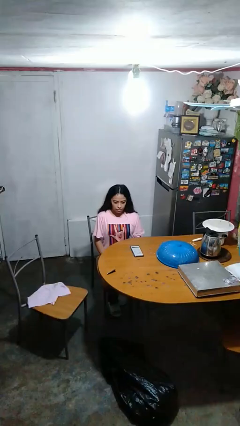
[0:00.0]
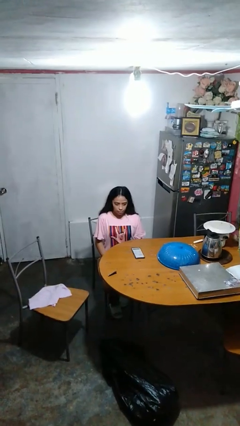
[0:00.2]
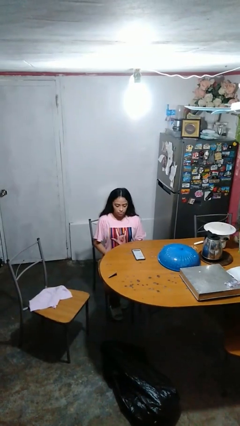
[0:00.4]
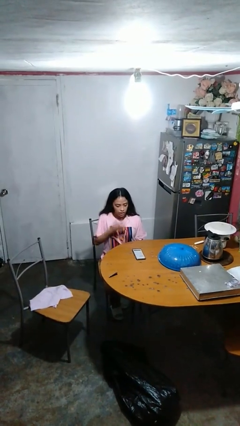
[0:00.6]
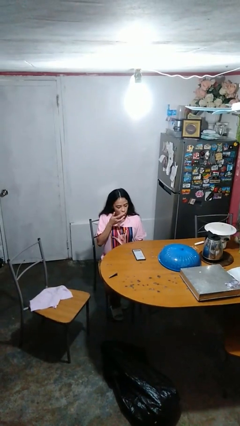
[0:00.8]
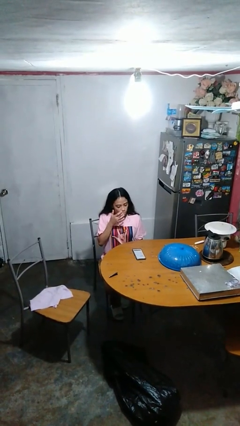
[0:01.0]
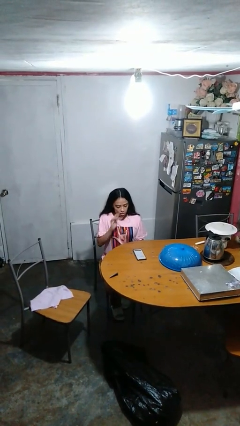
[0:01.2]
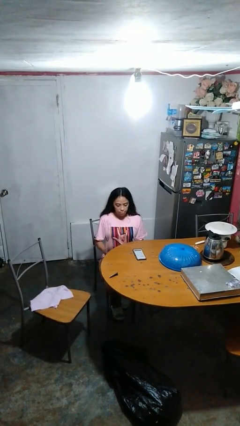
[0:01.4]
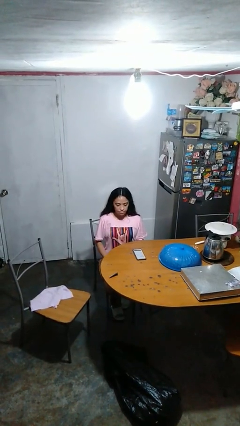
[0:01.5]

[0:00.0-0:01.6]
person licks fingers

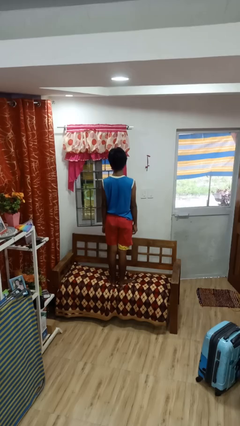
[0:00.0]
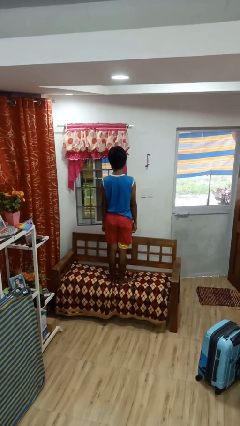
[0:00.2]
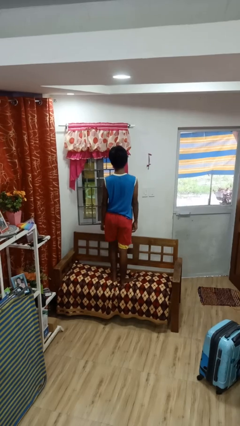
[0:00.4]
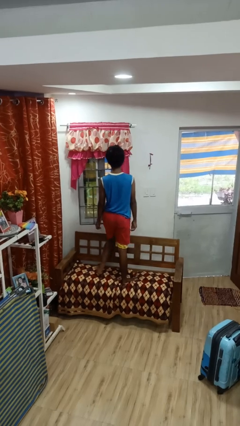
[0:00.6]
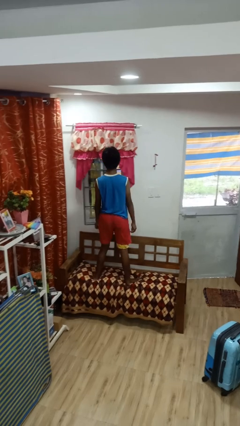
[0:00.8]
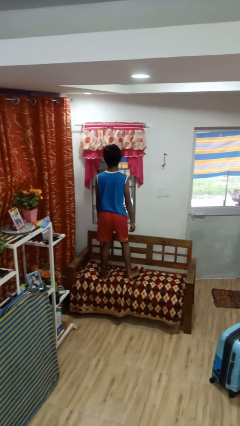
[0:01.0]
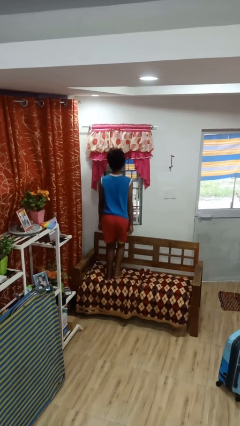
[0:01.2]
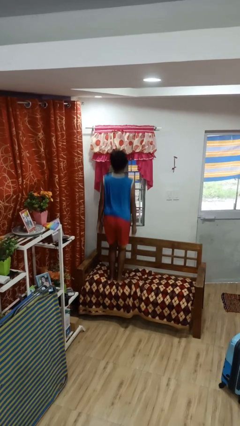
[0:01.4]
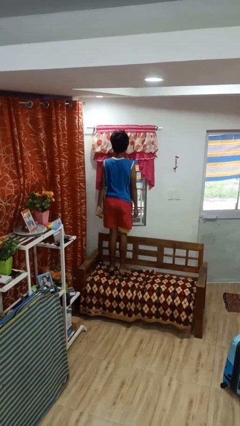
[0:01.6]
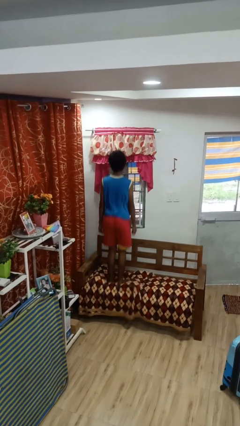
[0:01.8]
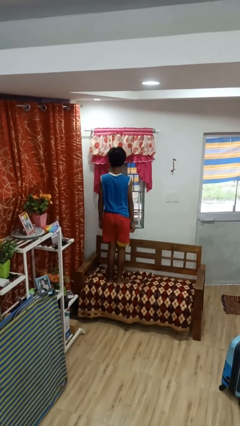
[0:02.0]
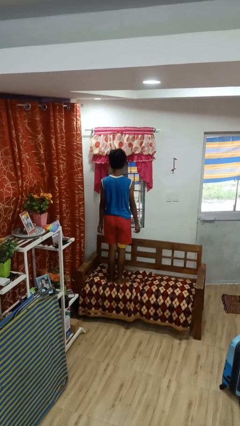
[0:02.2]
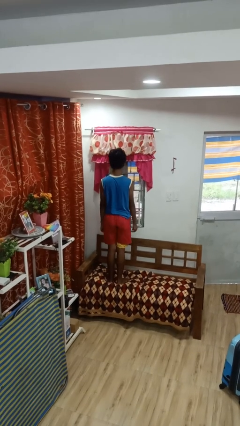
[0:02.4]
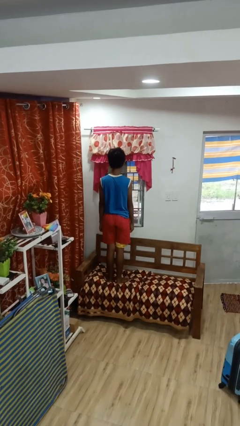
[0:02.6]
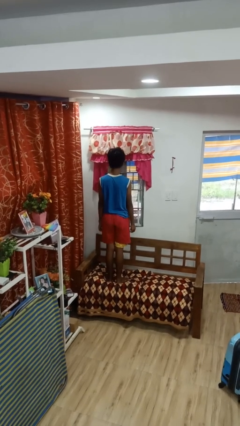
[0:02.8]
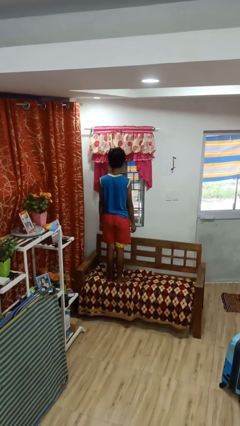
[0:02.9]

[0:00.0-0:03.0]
person jumps on couch

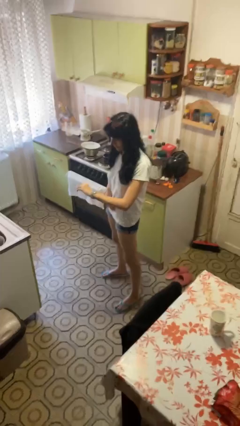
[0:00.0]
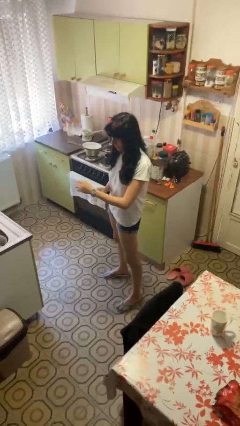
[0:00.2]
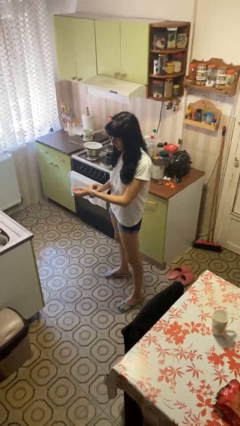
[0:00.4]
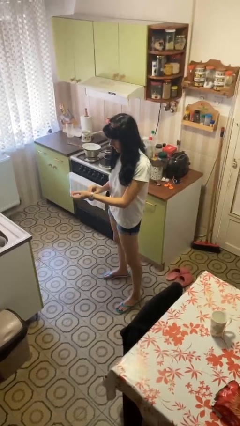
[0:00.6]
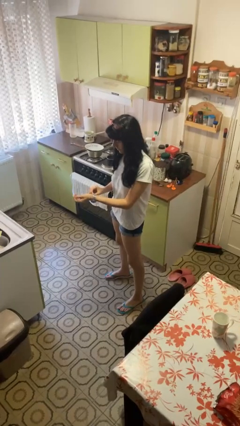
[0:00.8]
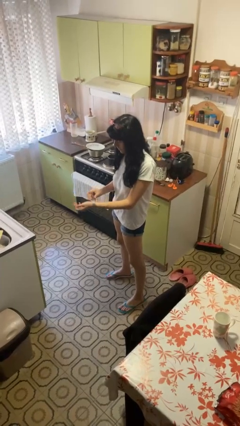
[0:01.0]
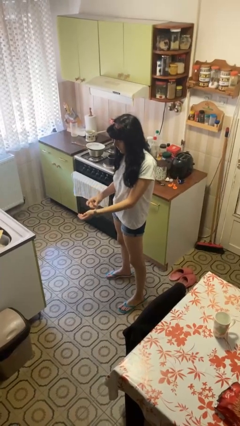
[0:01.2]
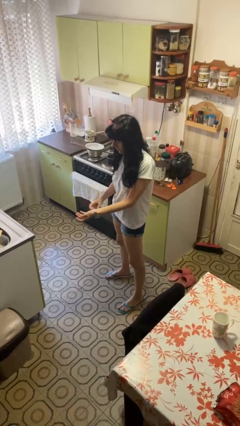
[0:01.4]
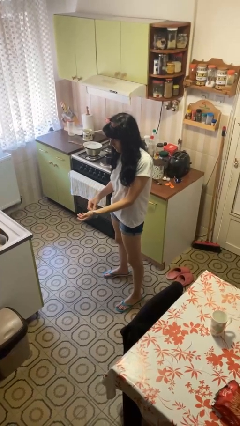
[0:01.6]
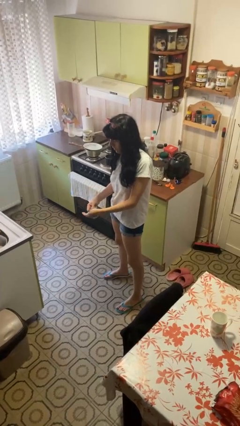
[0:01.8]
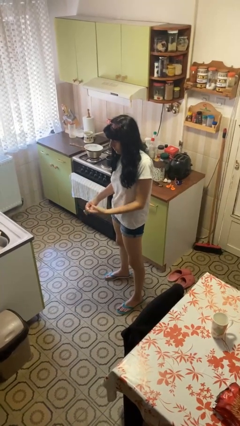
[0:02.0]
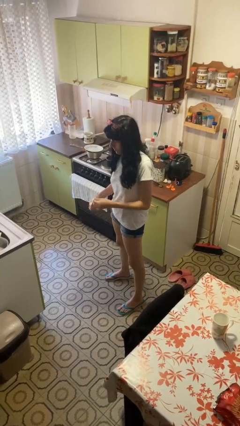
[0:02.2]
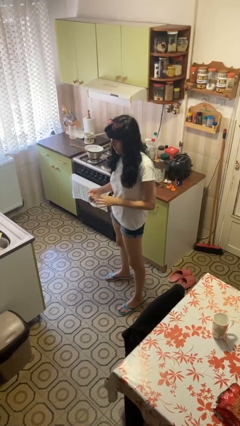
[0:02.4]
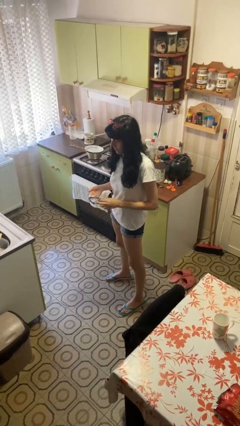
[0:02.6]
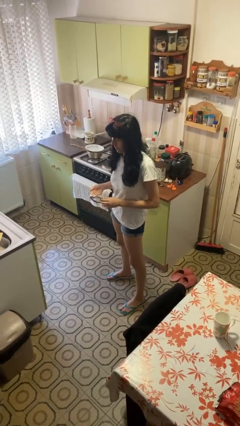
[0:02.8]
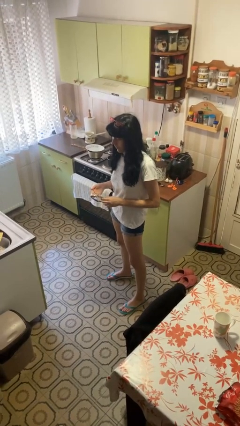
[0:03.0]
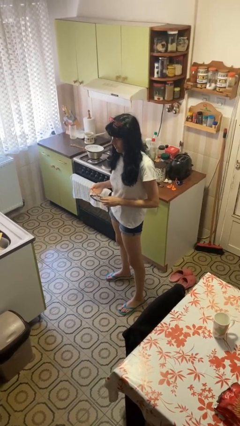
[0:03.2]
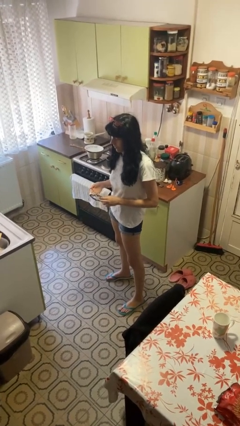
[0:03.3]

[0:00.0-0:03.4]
person takes off wristwatch

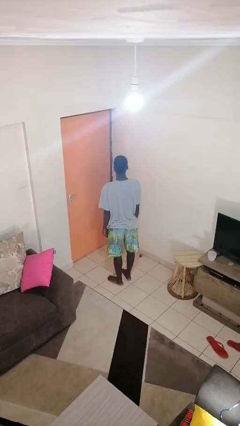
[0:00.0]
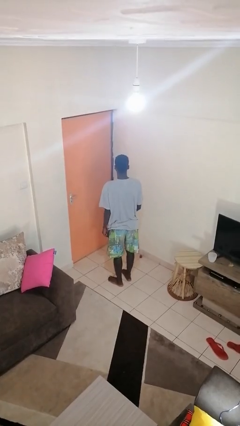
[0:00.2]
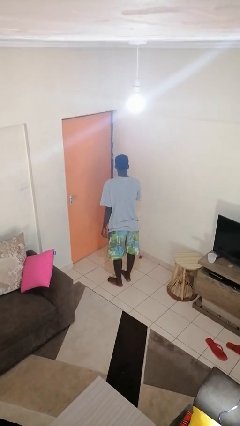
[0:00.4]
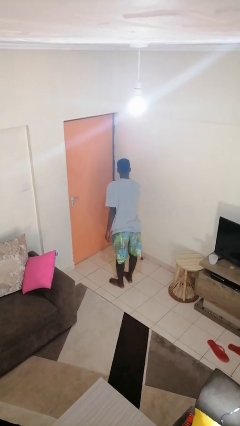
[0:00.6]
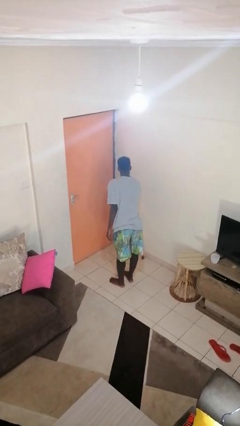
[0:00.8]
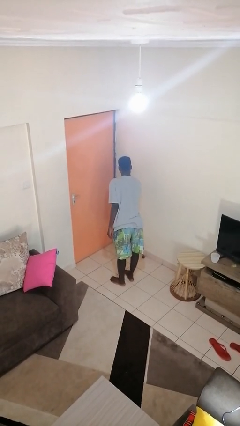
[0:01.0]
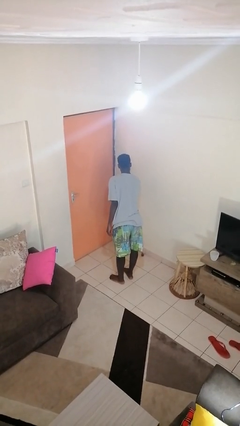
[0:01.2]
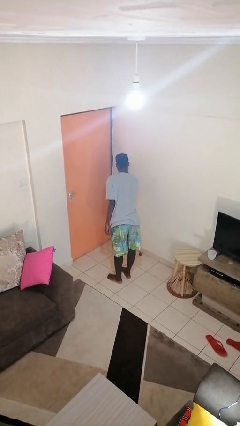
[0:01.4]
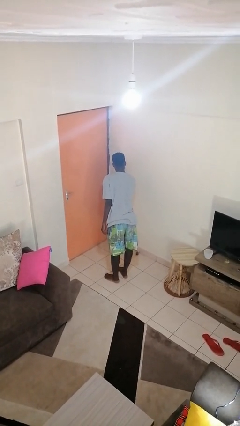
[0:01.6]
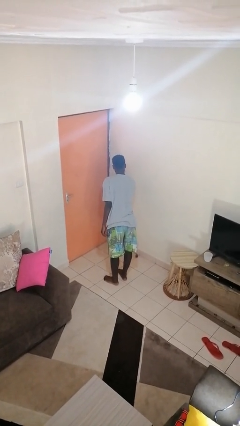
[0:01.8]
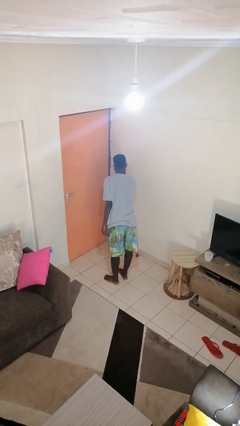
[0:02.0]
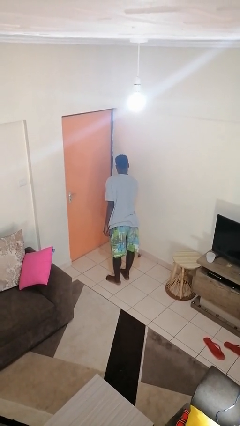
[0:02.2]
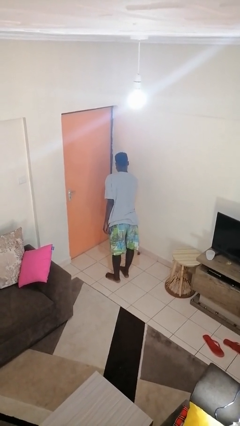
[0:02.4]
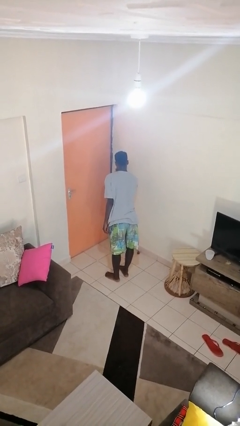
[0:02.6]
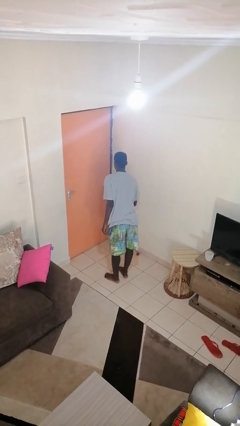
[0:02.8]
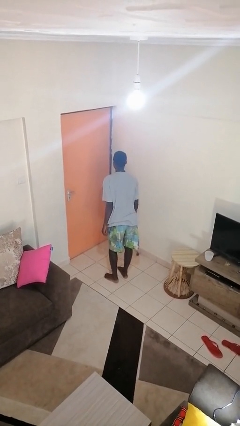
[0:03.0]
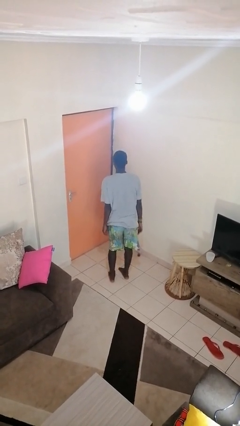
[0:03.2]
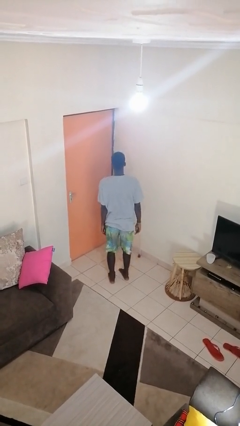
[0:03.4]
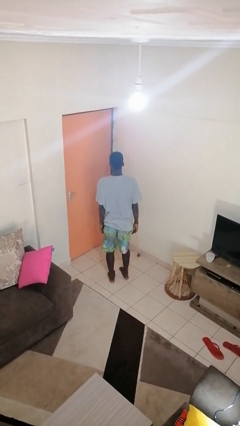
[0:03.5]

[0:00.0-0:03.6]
person gestures watch closely

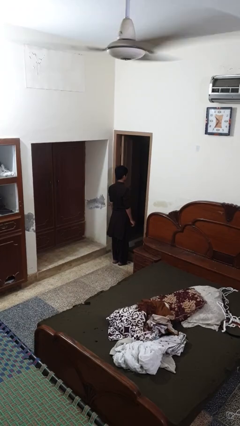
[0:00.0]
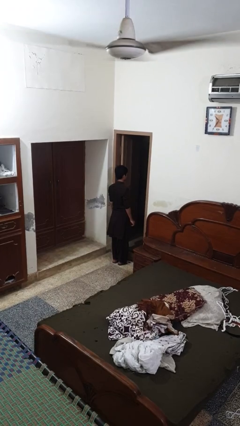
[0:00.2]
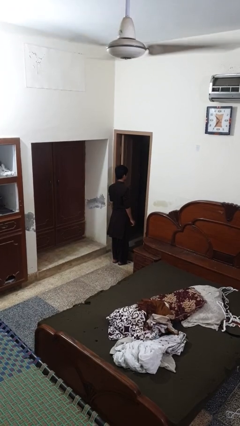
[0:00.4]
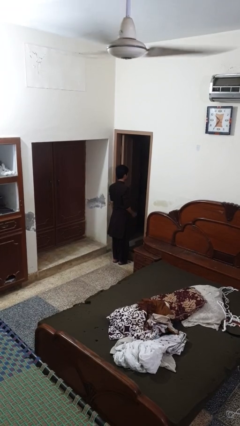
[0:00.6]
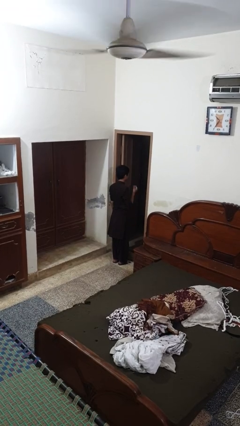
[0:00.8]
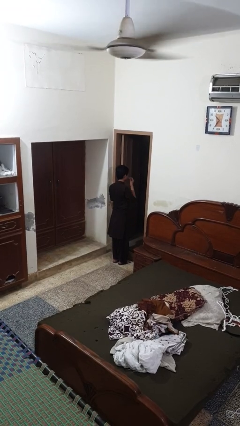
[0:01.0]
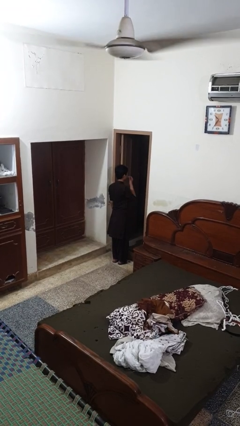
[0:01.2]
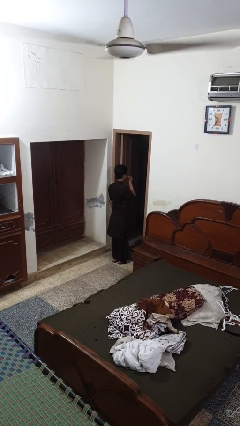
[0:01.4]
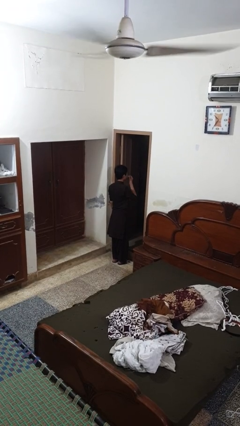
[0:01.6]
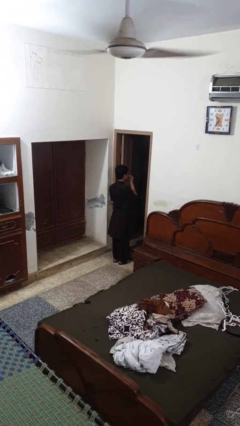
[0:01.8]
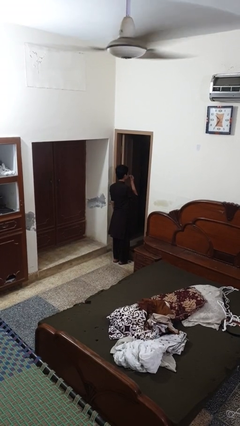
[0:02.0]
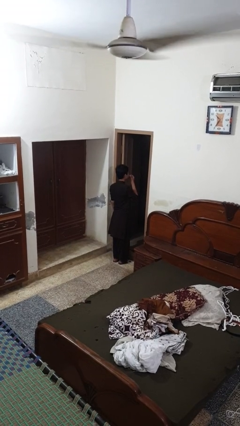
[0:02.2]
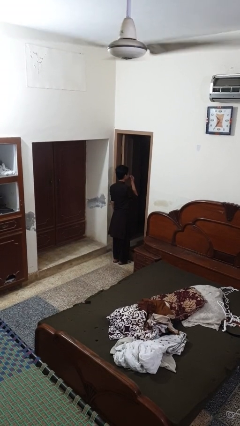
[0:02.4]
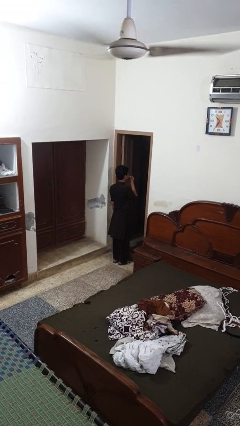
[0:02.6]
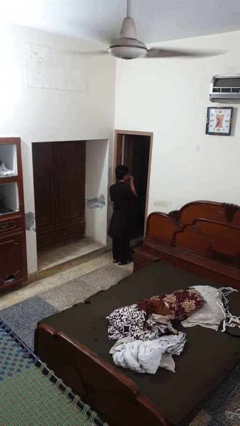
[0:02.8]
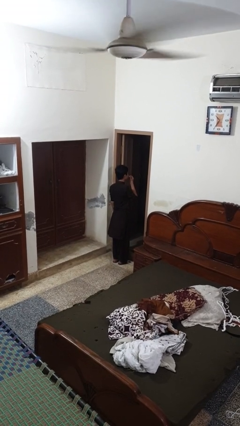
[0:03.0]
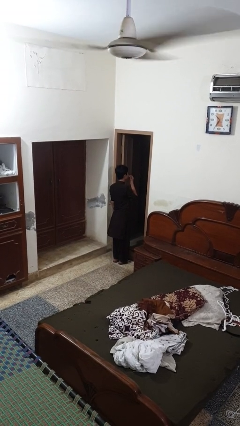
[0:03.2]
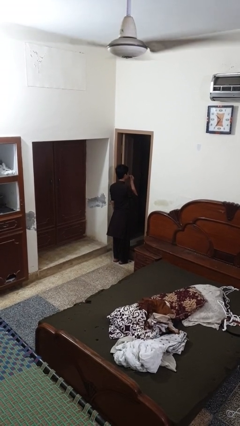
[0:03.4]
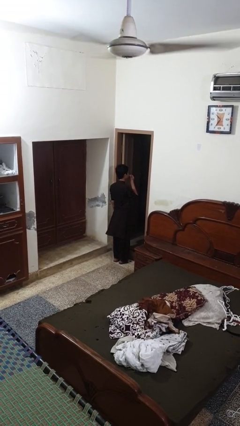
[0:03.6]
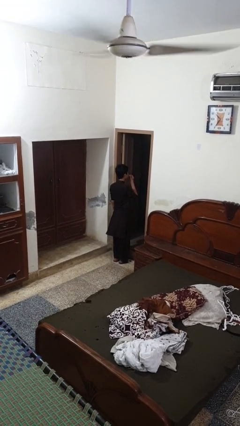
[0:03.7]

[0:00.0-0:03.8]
person flosses

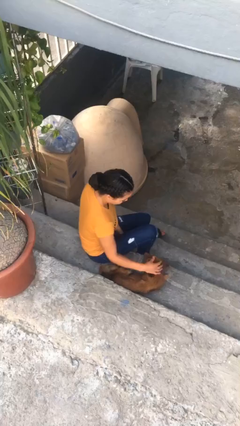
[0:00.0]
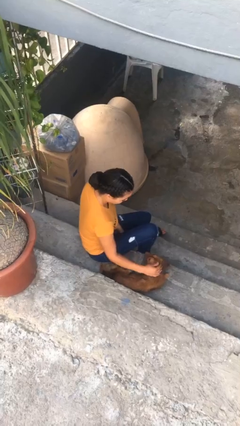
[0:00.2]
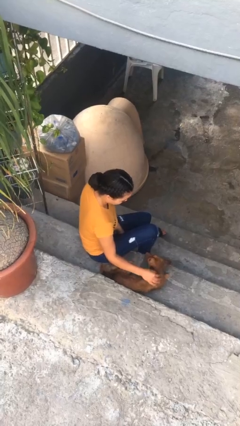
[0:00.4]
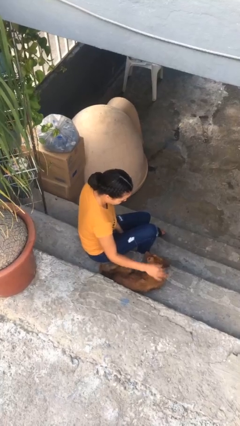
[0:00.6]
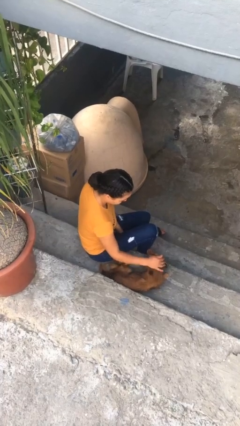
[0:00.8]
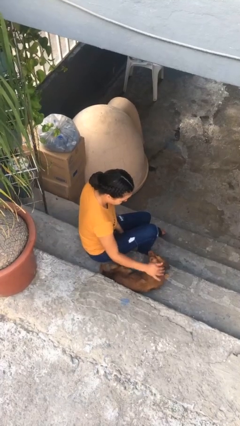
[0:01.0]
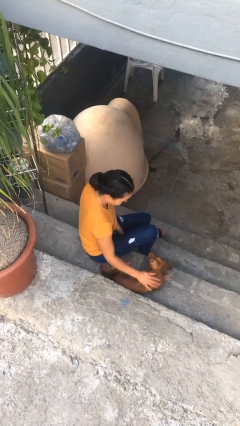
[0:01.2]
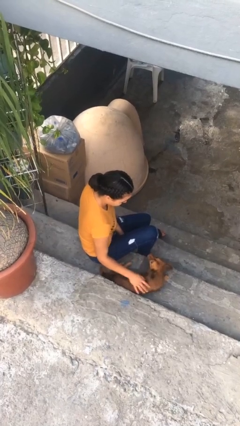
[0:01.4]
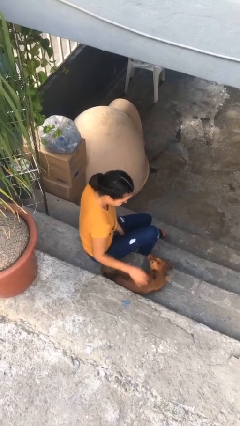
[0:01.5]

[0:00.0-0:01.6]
person pets dog
